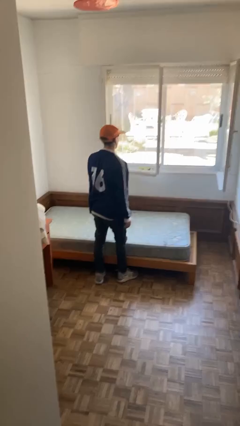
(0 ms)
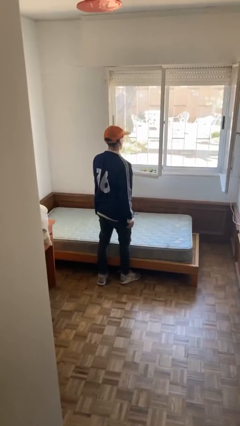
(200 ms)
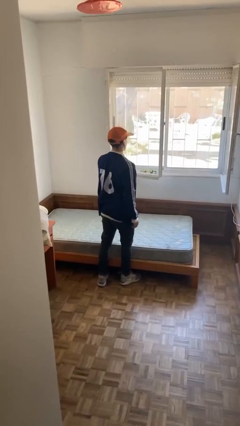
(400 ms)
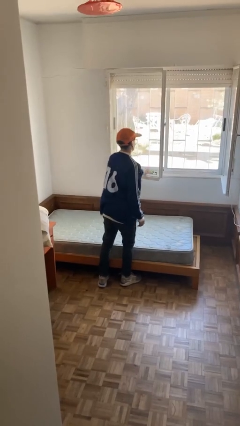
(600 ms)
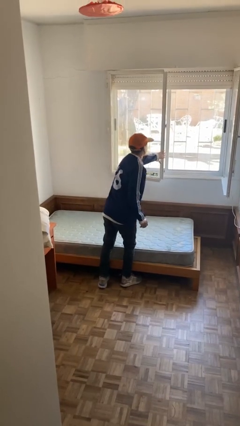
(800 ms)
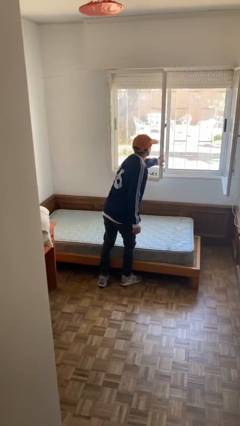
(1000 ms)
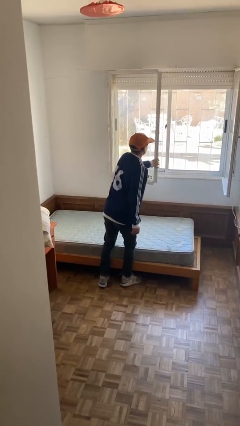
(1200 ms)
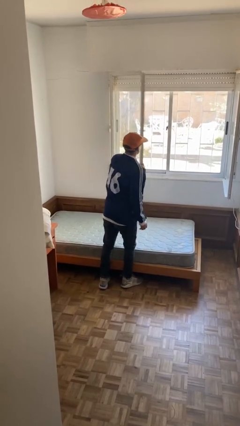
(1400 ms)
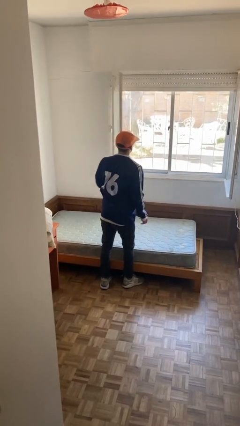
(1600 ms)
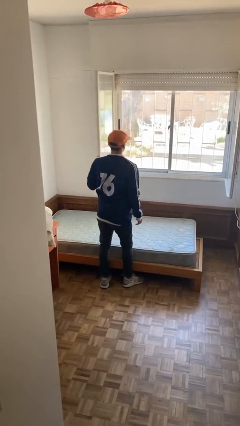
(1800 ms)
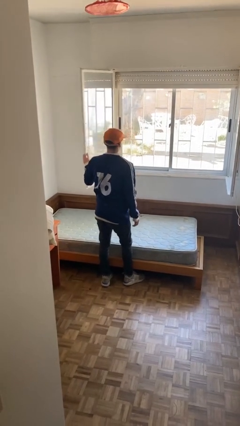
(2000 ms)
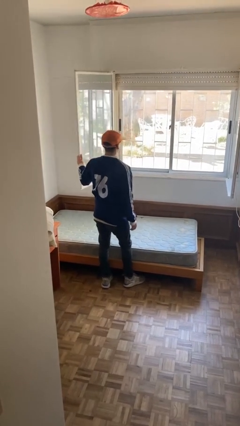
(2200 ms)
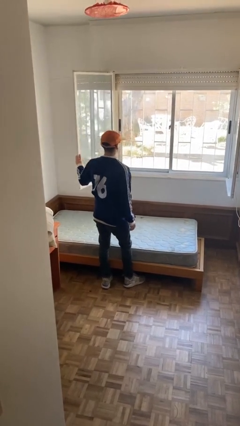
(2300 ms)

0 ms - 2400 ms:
person opens home window

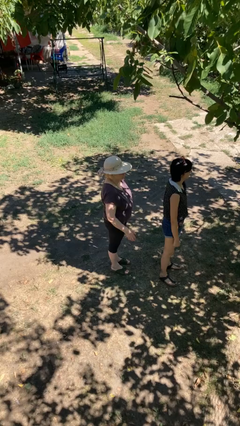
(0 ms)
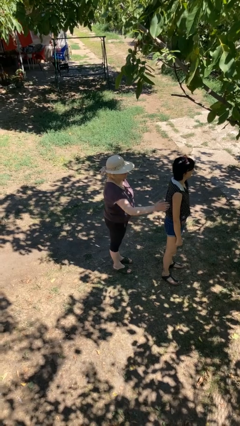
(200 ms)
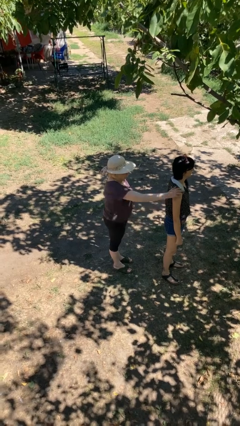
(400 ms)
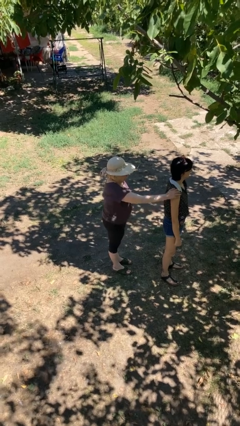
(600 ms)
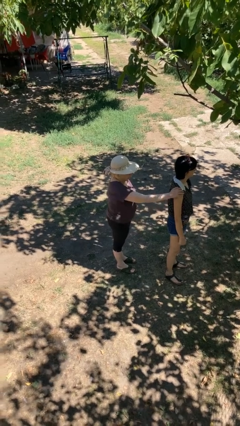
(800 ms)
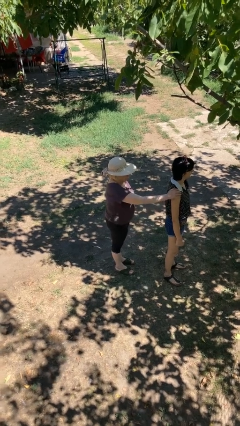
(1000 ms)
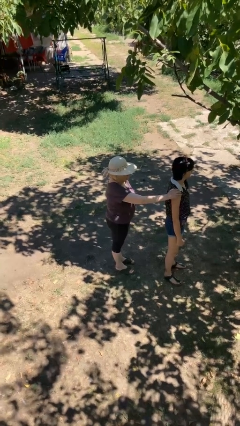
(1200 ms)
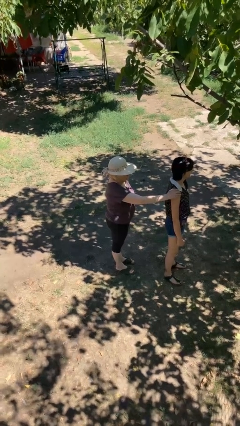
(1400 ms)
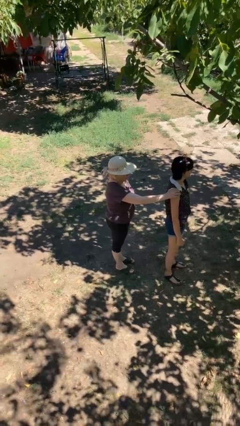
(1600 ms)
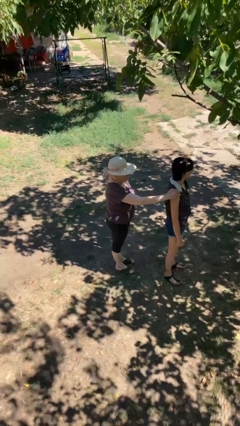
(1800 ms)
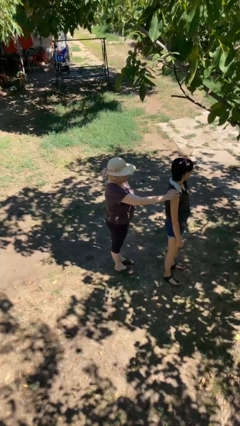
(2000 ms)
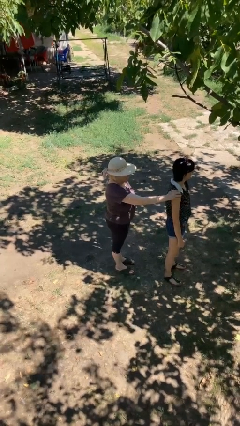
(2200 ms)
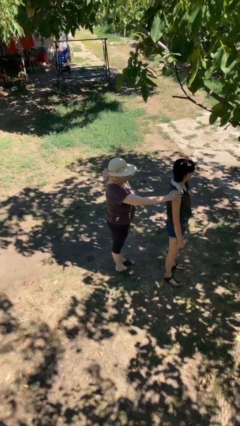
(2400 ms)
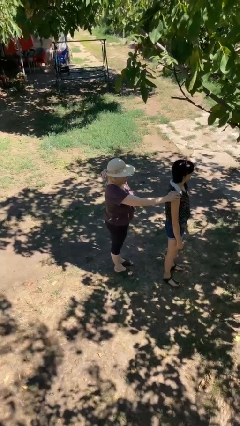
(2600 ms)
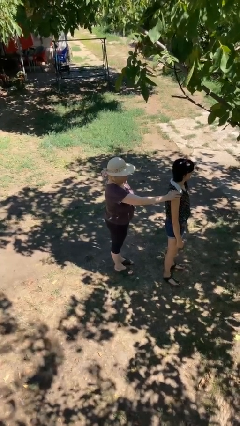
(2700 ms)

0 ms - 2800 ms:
person grabs person by shoulder

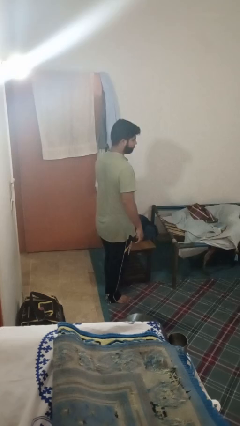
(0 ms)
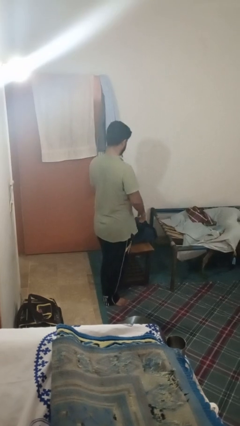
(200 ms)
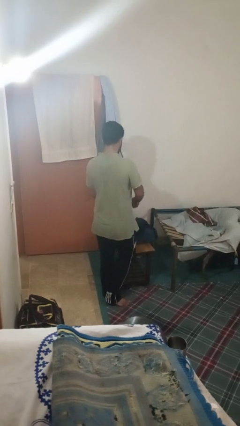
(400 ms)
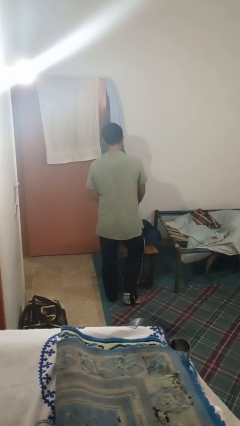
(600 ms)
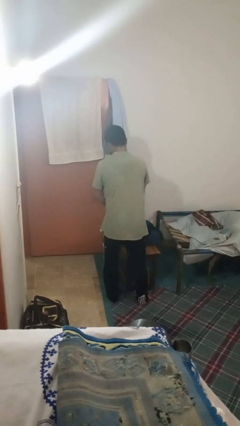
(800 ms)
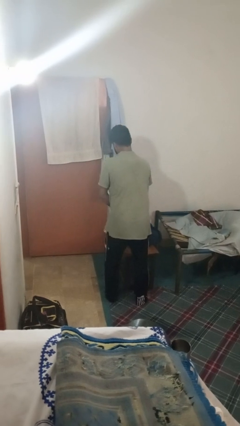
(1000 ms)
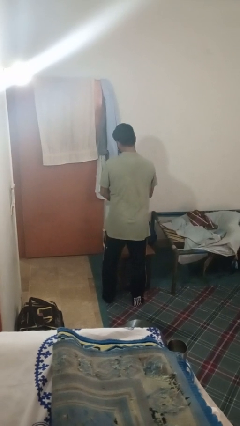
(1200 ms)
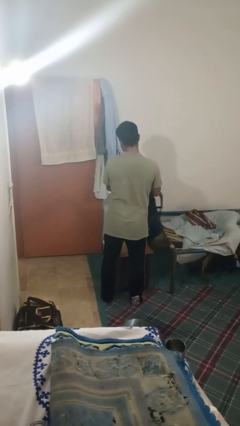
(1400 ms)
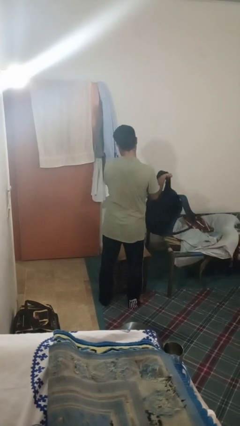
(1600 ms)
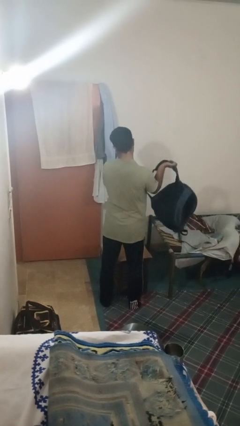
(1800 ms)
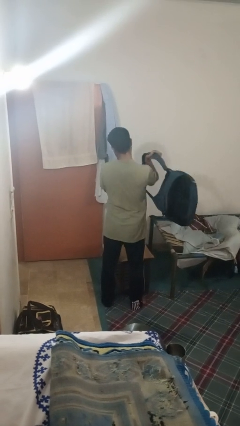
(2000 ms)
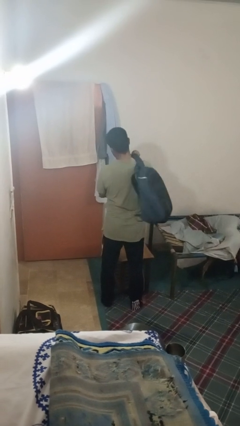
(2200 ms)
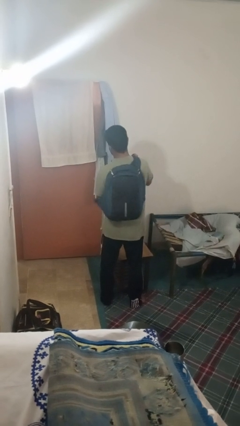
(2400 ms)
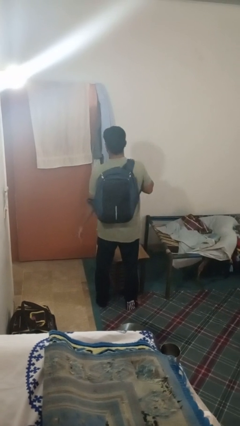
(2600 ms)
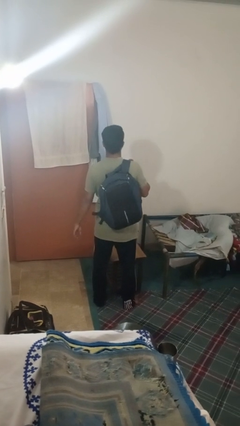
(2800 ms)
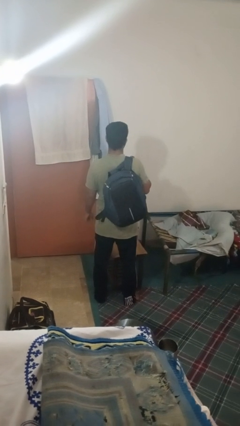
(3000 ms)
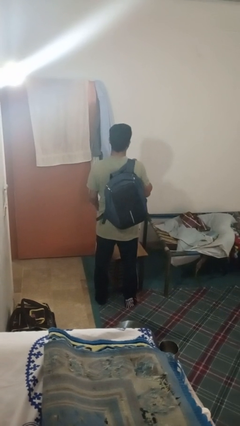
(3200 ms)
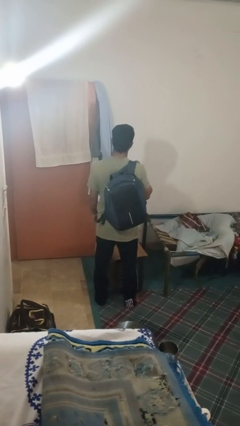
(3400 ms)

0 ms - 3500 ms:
person puts on backpack

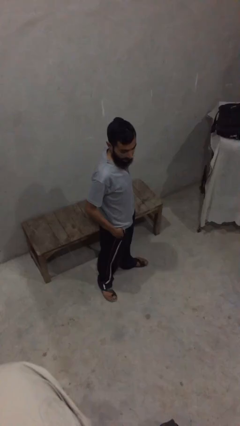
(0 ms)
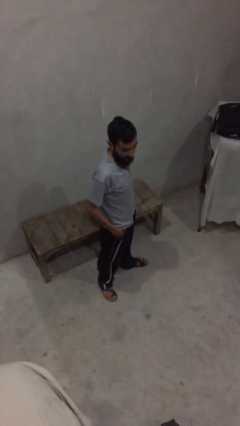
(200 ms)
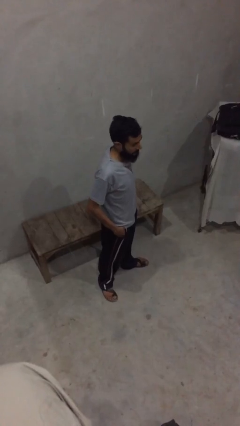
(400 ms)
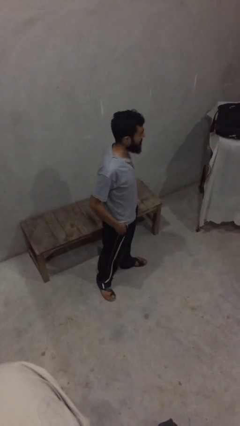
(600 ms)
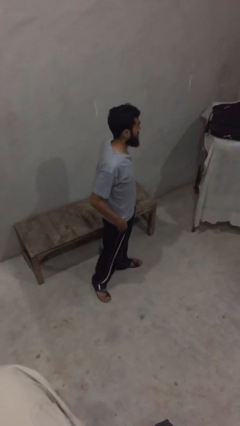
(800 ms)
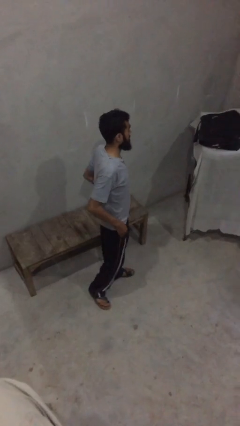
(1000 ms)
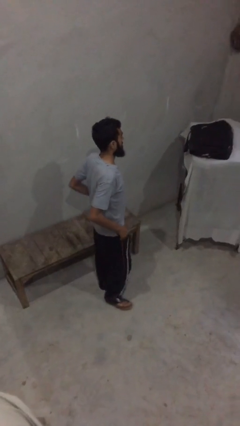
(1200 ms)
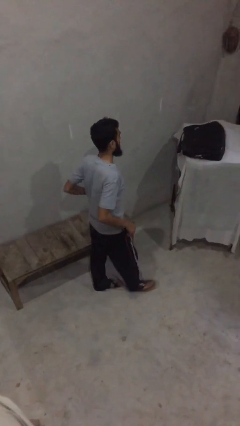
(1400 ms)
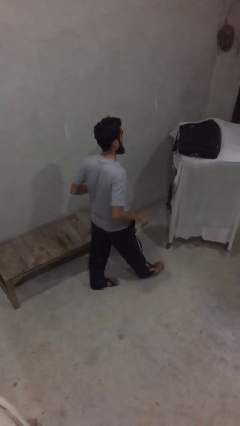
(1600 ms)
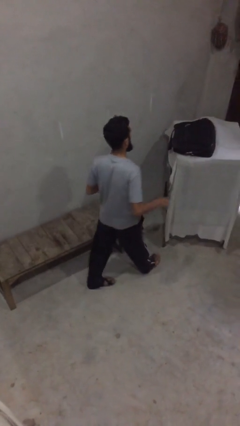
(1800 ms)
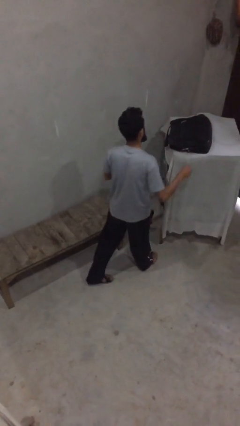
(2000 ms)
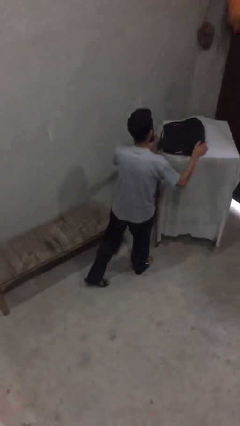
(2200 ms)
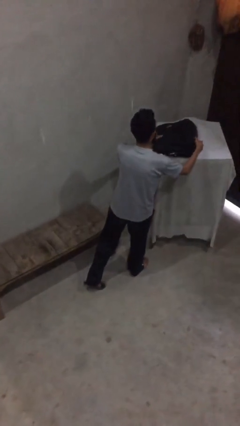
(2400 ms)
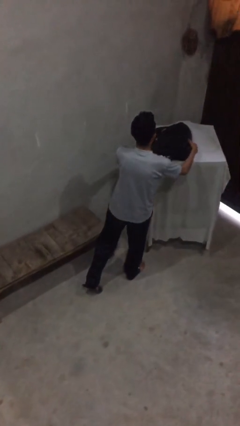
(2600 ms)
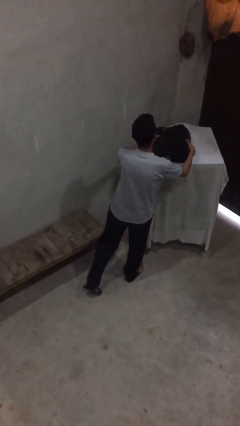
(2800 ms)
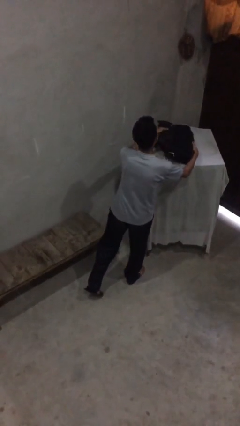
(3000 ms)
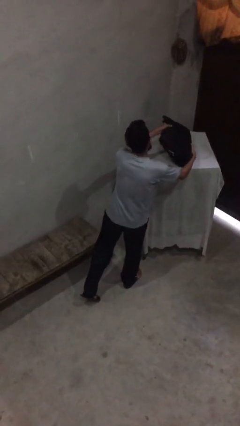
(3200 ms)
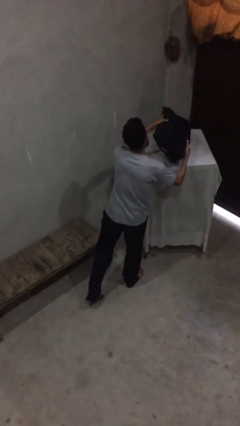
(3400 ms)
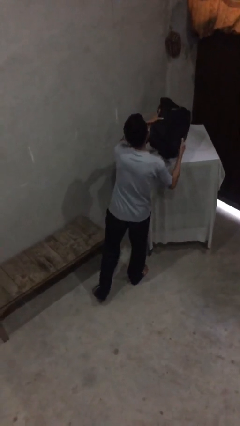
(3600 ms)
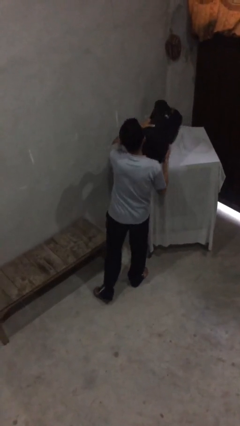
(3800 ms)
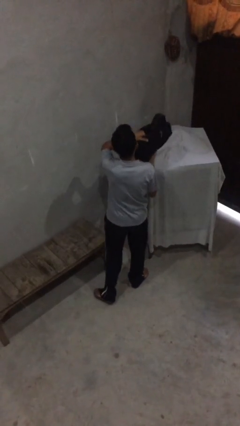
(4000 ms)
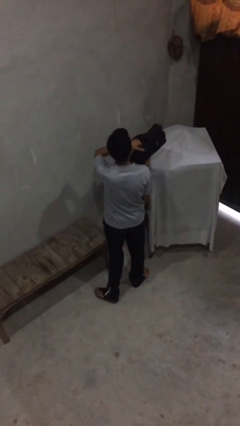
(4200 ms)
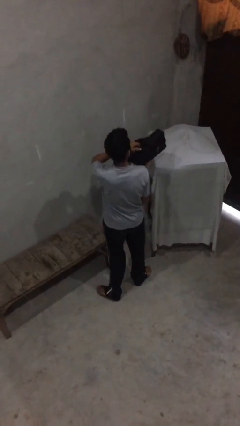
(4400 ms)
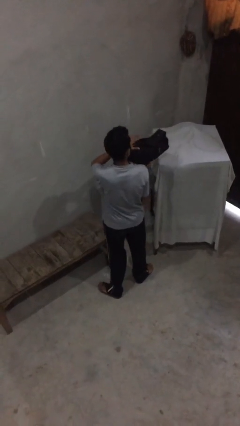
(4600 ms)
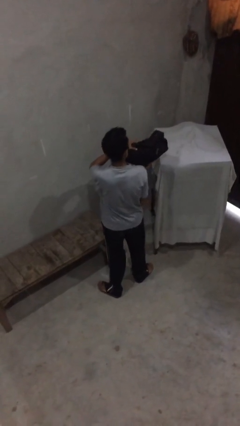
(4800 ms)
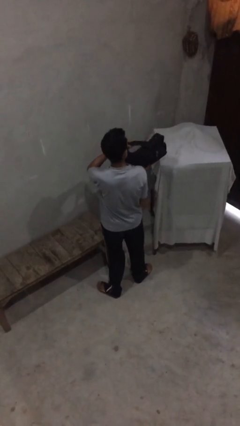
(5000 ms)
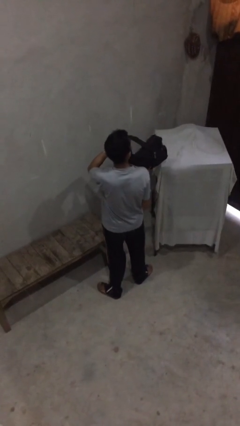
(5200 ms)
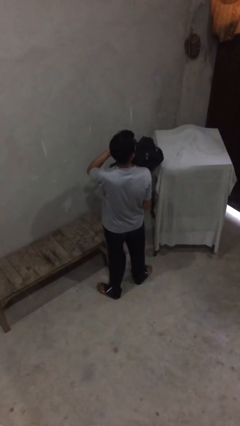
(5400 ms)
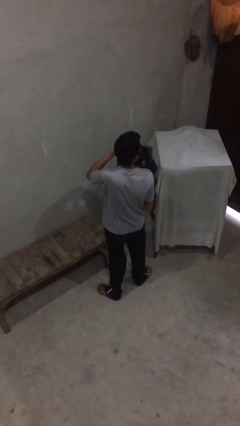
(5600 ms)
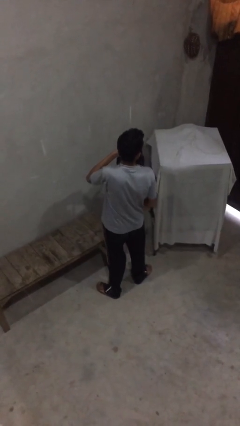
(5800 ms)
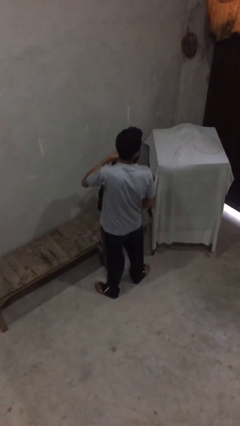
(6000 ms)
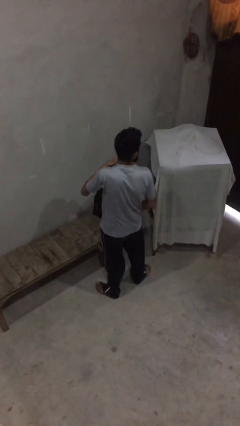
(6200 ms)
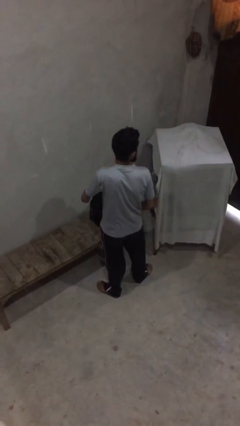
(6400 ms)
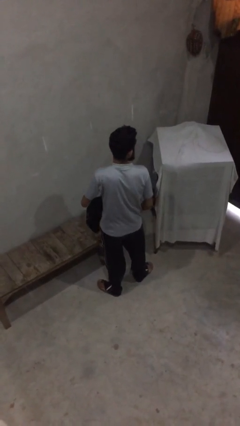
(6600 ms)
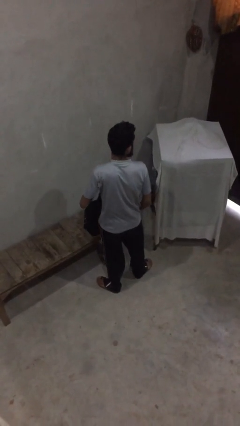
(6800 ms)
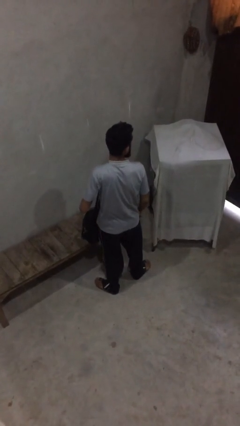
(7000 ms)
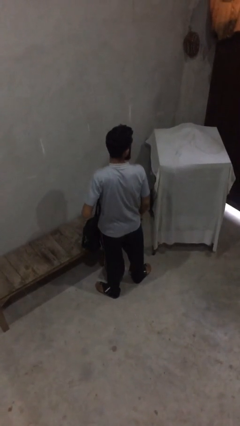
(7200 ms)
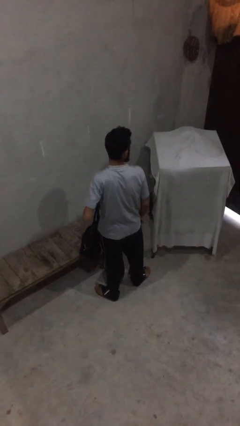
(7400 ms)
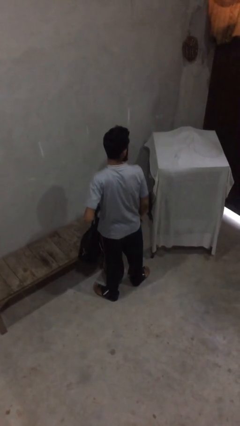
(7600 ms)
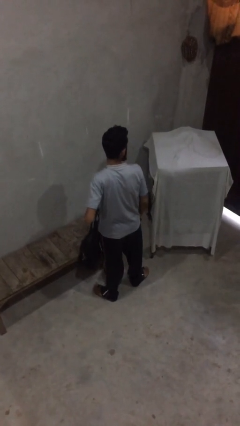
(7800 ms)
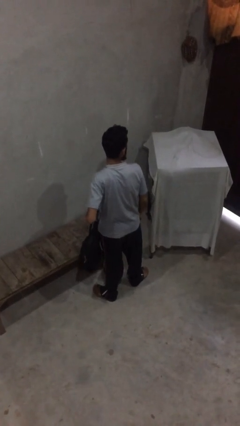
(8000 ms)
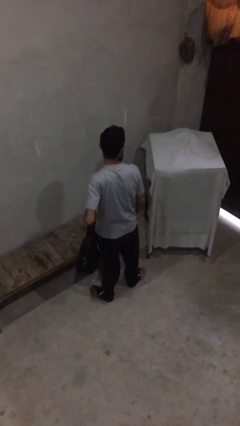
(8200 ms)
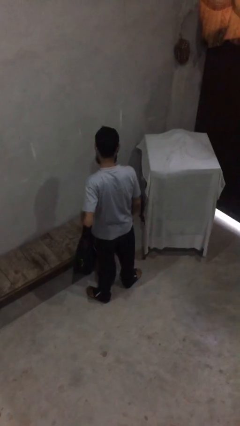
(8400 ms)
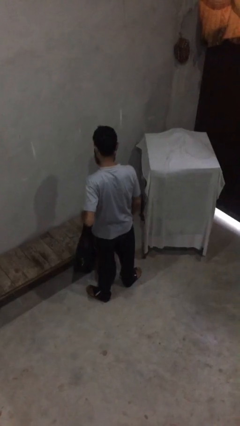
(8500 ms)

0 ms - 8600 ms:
person picks up object from shelf

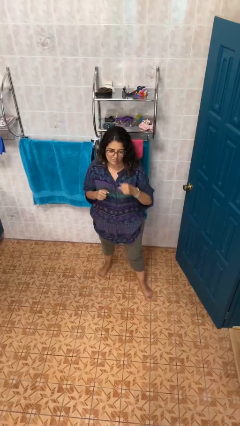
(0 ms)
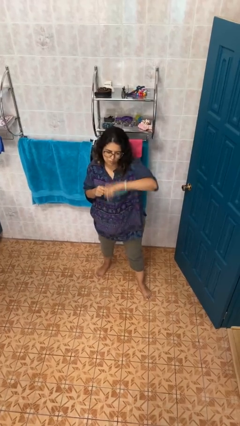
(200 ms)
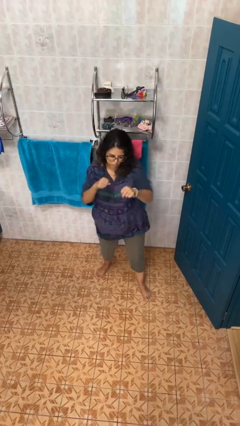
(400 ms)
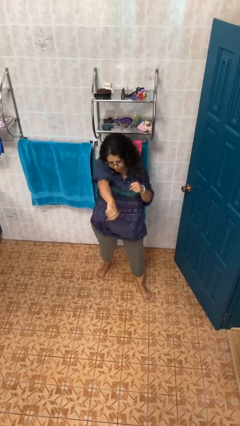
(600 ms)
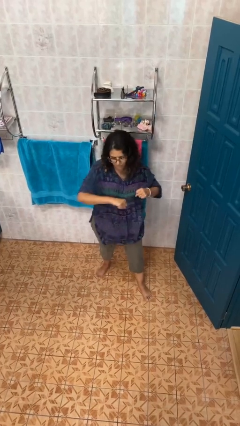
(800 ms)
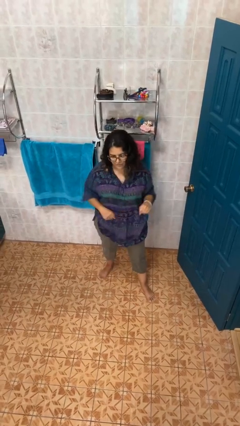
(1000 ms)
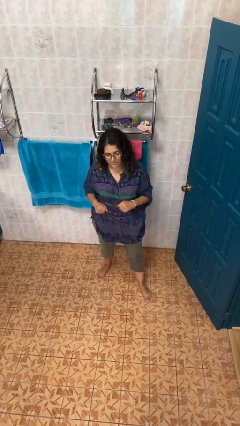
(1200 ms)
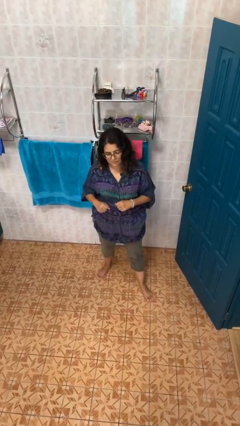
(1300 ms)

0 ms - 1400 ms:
person punches
